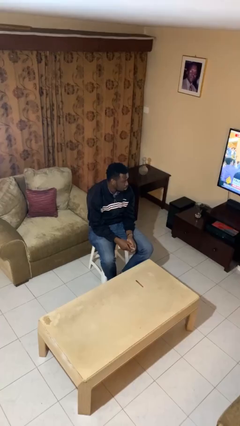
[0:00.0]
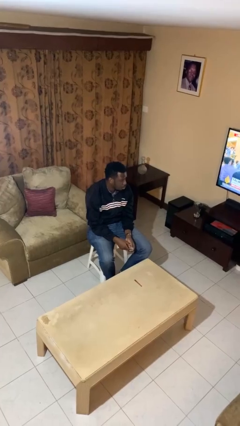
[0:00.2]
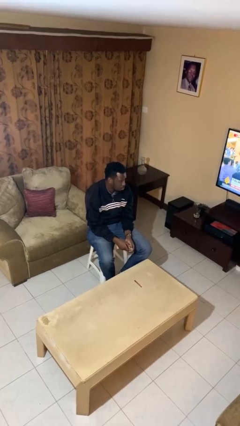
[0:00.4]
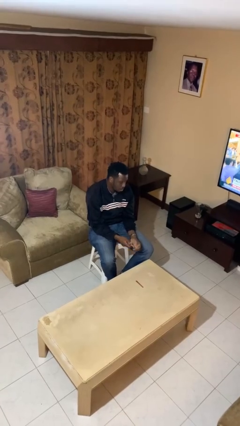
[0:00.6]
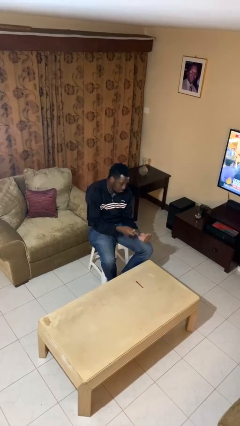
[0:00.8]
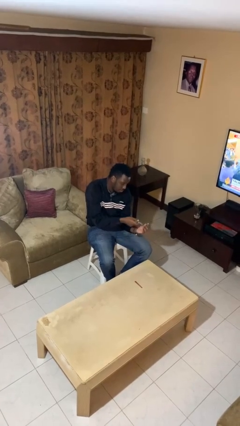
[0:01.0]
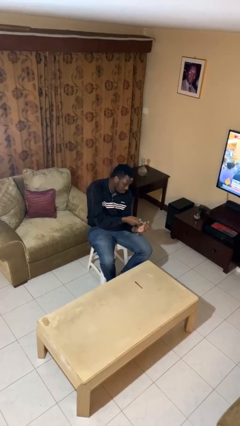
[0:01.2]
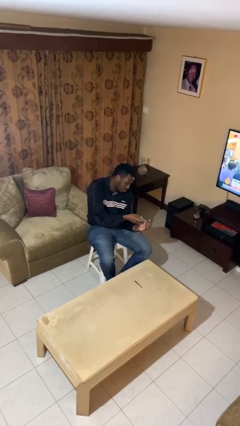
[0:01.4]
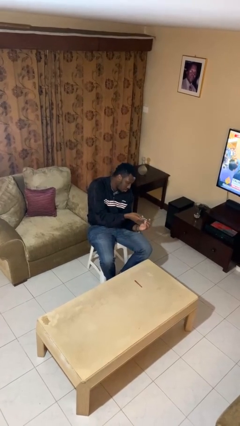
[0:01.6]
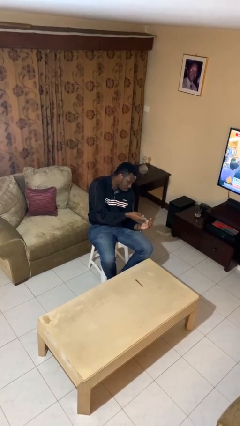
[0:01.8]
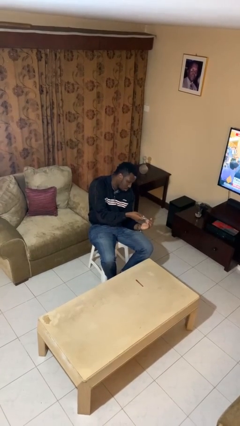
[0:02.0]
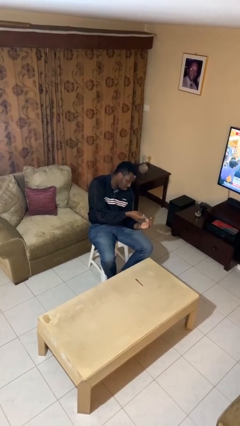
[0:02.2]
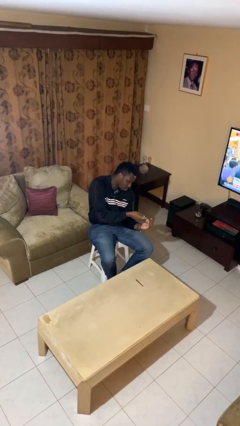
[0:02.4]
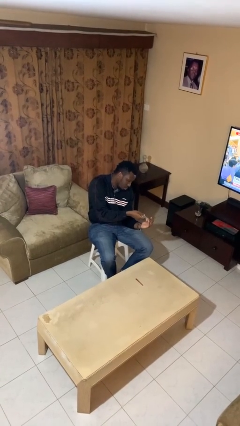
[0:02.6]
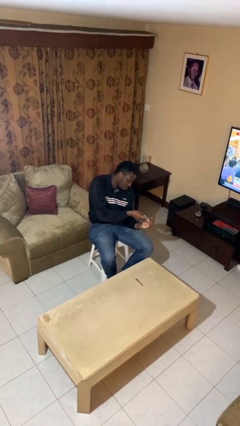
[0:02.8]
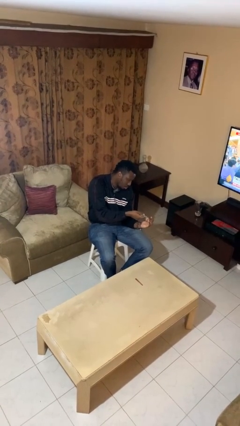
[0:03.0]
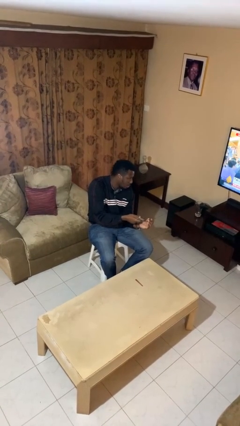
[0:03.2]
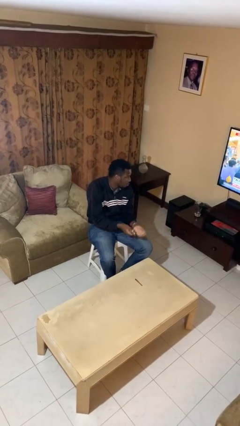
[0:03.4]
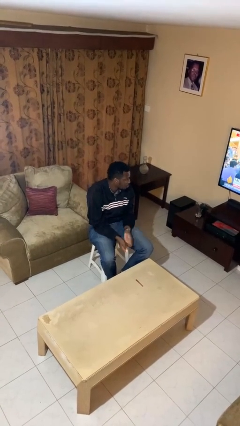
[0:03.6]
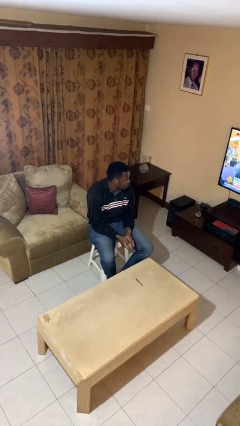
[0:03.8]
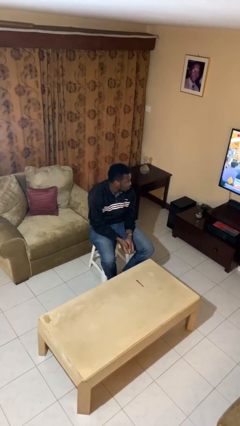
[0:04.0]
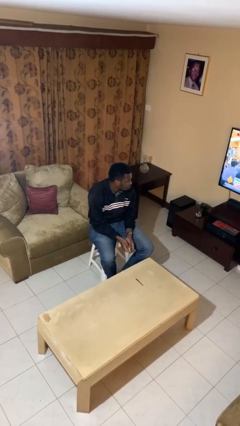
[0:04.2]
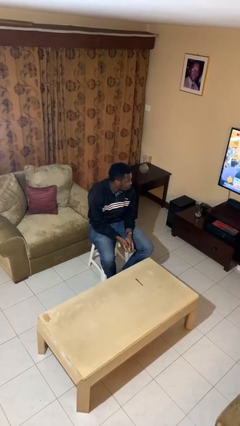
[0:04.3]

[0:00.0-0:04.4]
person clips fingernails

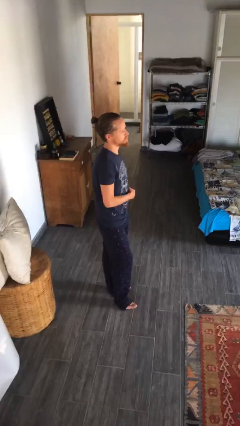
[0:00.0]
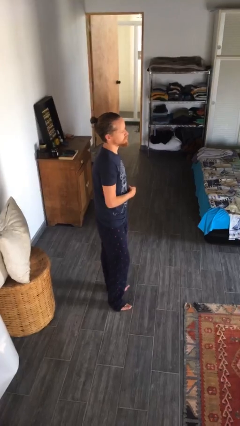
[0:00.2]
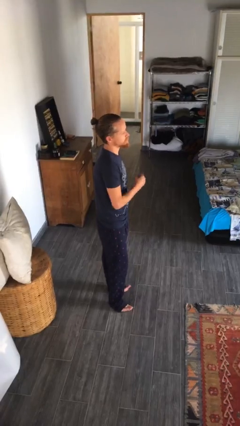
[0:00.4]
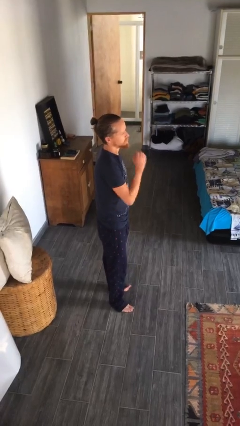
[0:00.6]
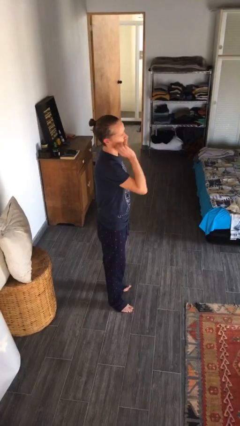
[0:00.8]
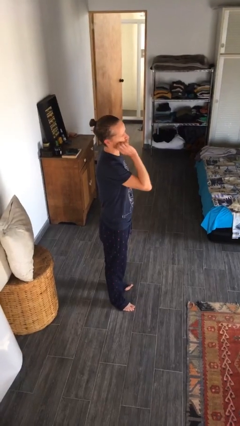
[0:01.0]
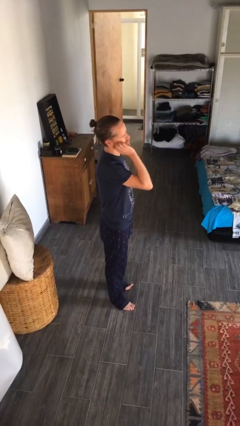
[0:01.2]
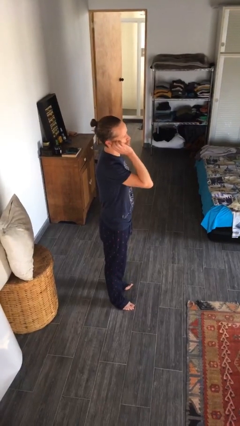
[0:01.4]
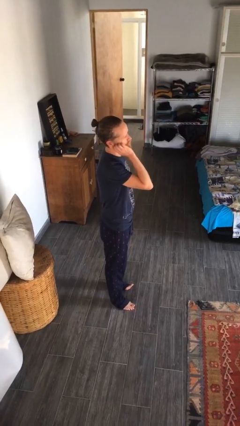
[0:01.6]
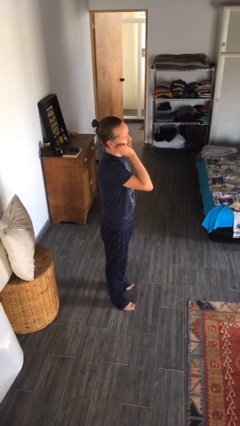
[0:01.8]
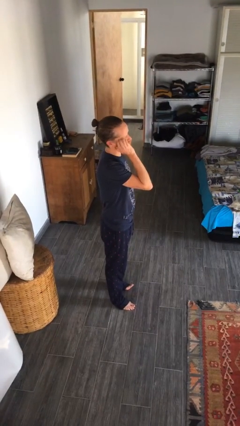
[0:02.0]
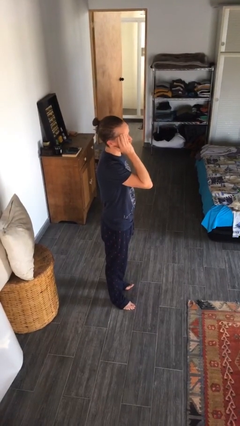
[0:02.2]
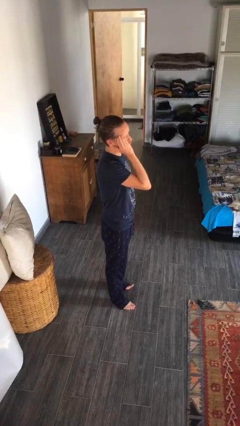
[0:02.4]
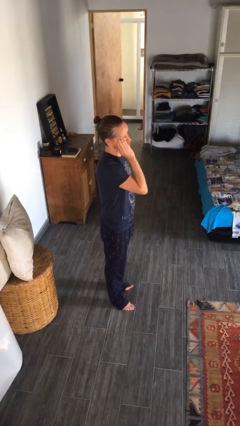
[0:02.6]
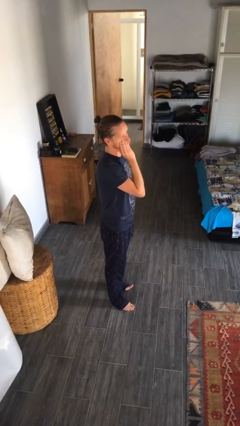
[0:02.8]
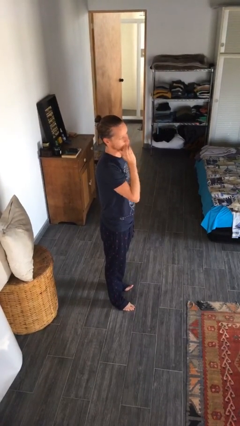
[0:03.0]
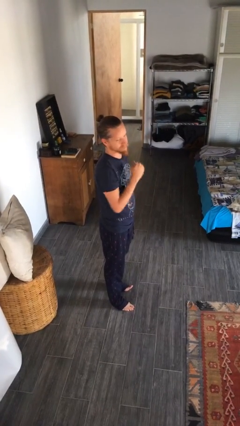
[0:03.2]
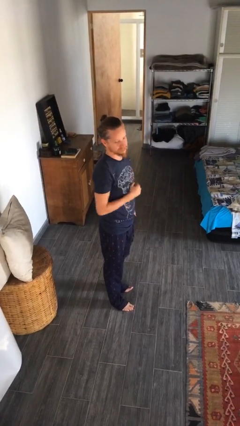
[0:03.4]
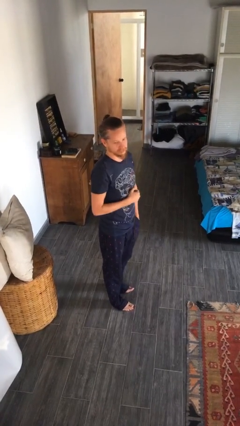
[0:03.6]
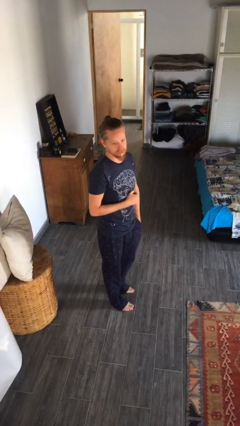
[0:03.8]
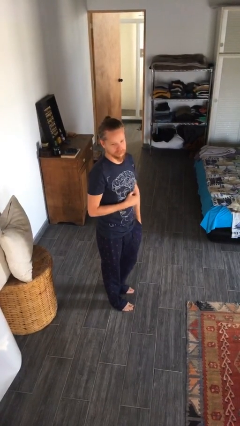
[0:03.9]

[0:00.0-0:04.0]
person scratches face

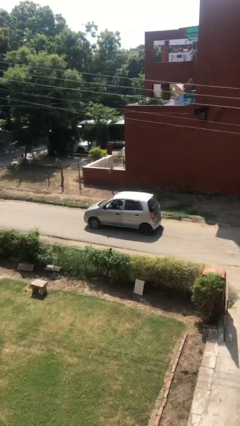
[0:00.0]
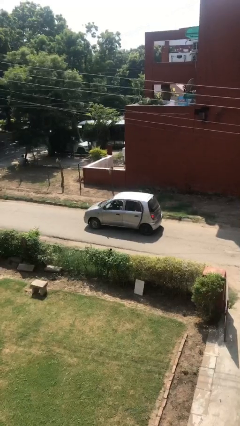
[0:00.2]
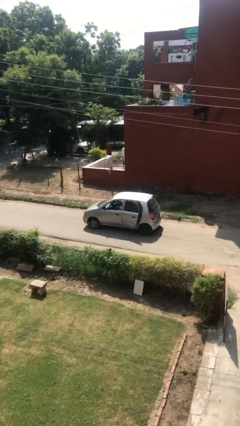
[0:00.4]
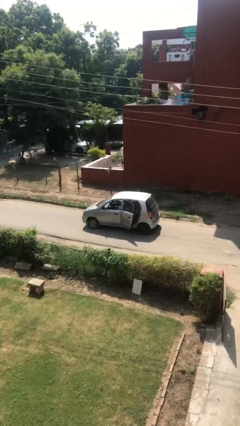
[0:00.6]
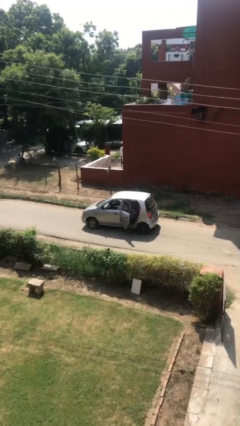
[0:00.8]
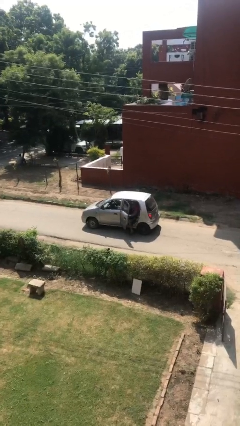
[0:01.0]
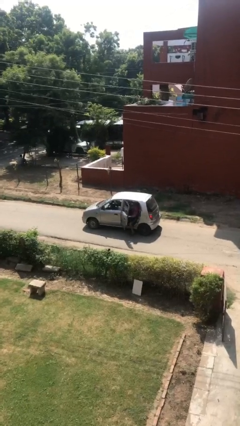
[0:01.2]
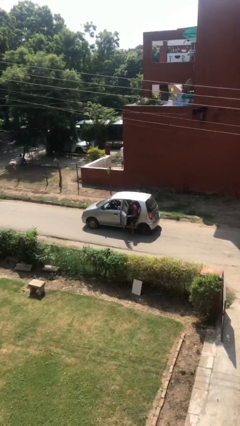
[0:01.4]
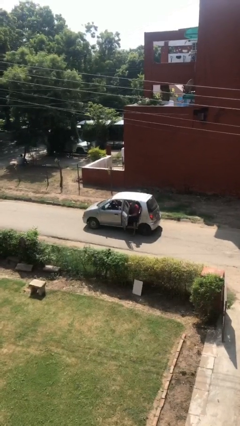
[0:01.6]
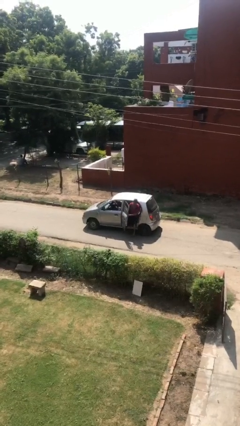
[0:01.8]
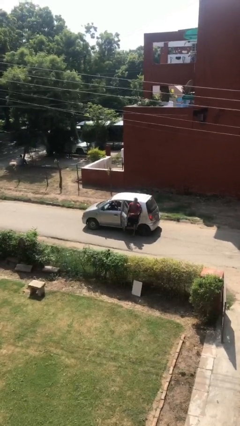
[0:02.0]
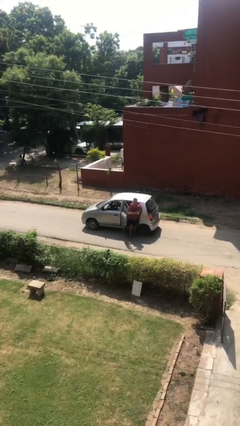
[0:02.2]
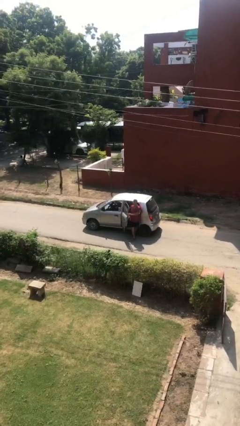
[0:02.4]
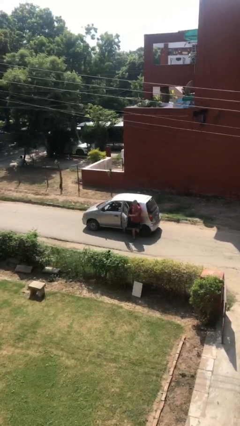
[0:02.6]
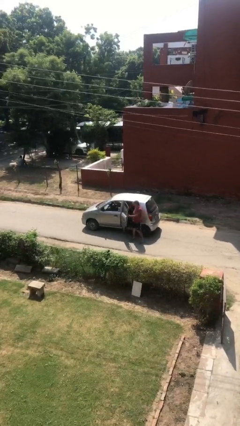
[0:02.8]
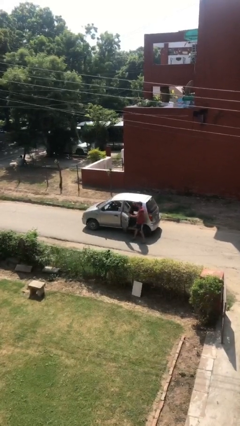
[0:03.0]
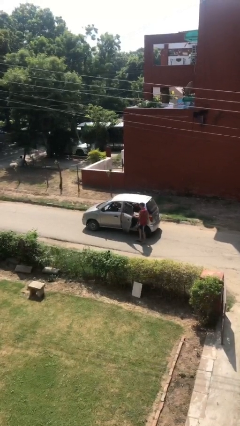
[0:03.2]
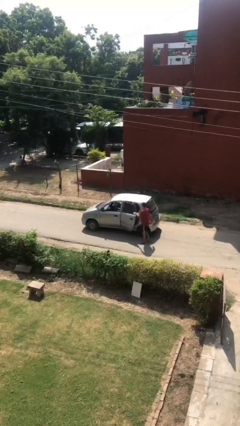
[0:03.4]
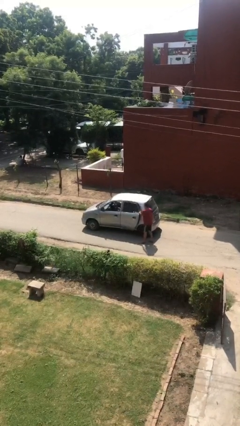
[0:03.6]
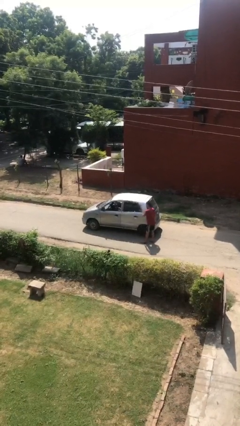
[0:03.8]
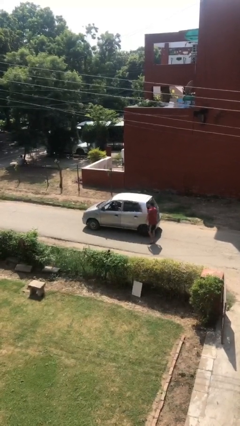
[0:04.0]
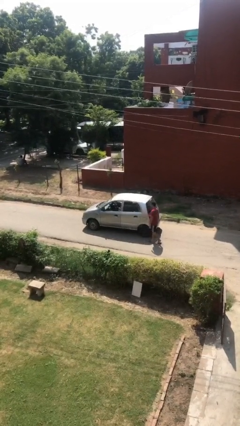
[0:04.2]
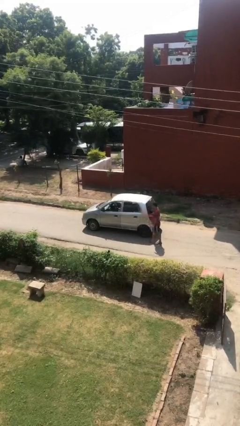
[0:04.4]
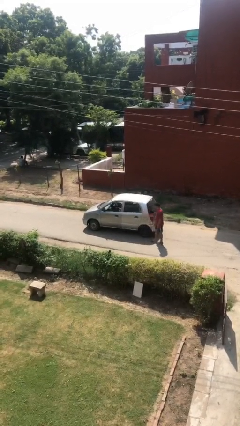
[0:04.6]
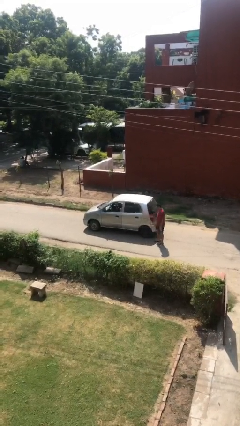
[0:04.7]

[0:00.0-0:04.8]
car drops off person

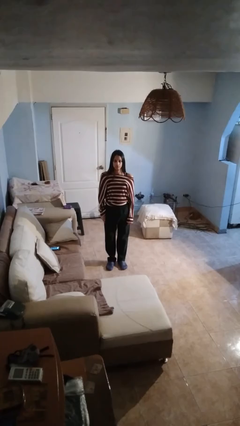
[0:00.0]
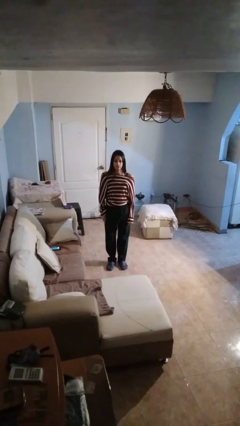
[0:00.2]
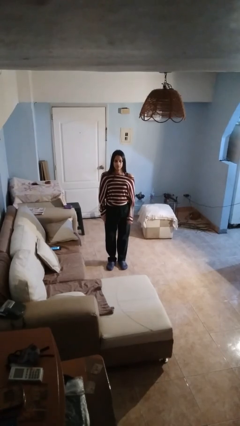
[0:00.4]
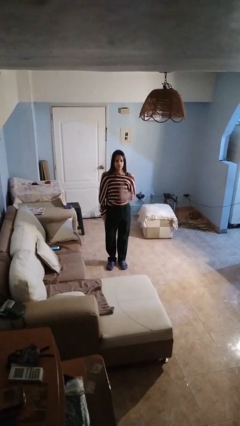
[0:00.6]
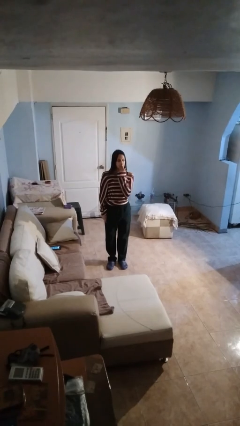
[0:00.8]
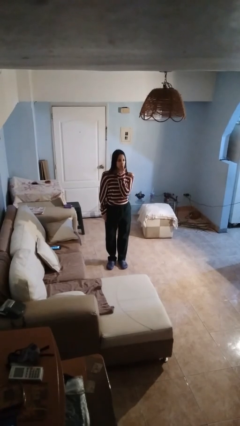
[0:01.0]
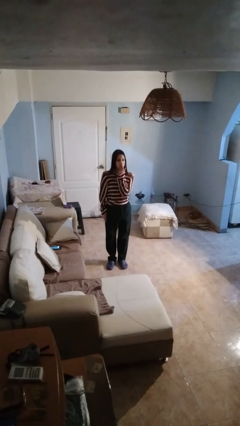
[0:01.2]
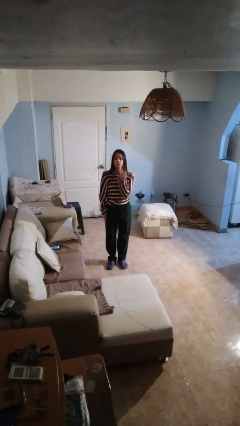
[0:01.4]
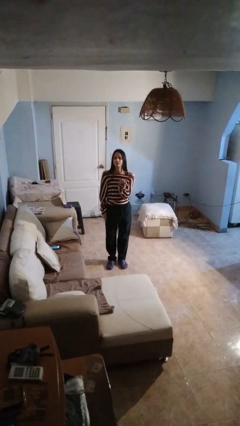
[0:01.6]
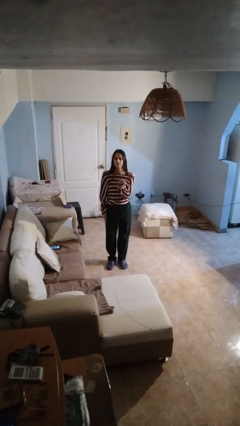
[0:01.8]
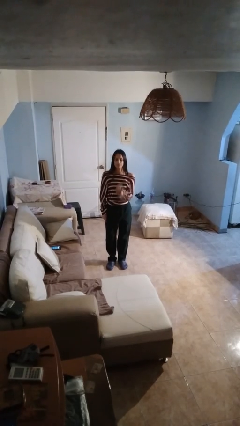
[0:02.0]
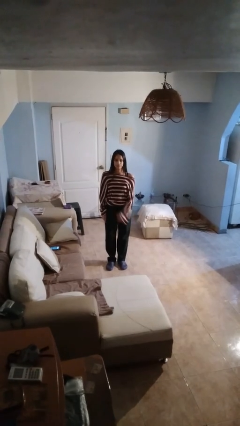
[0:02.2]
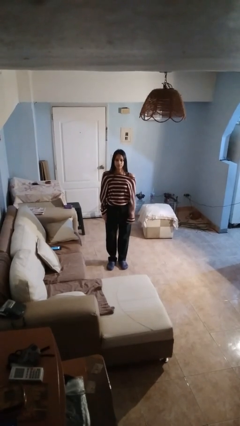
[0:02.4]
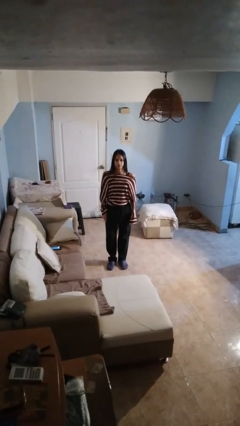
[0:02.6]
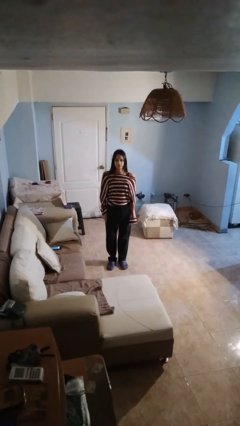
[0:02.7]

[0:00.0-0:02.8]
person gestures blow kiss

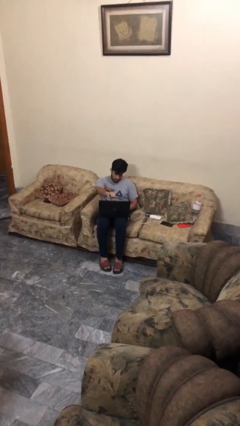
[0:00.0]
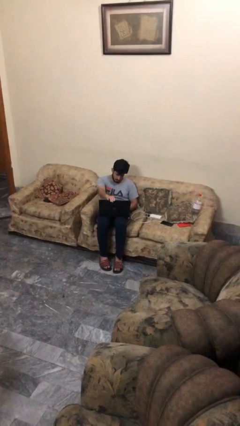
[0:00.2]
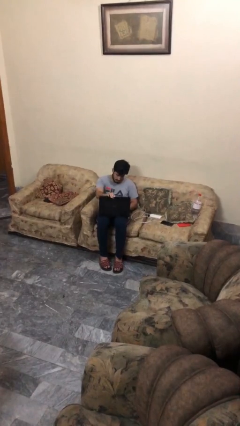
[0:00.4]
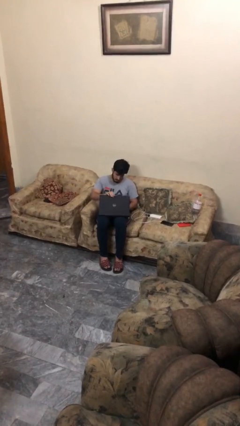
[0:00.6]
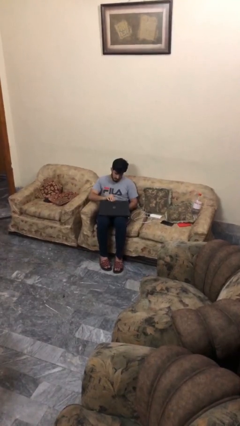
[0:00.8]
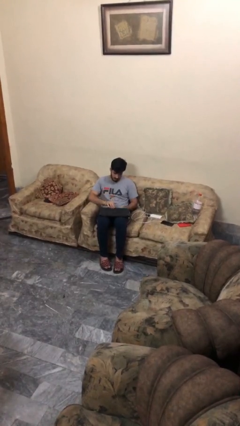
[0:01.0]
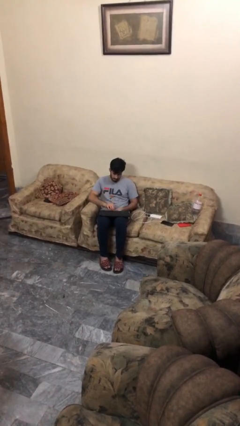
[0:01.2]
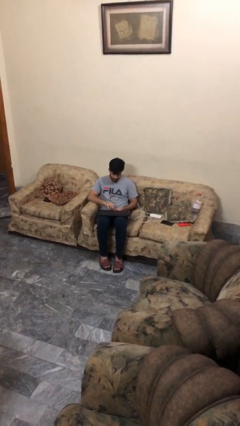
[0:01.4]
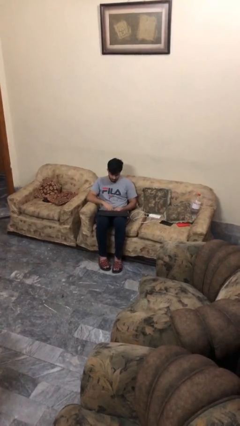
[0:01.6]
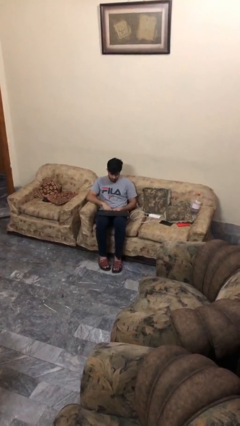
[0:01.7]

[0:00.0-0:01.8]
person closes laptop
